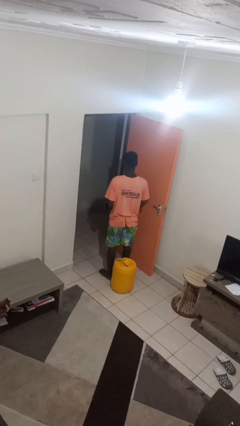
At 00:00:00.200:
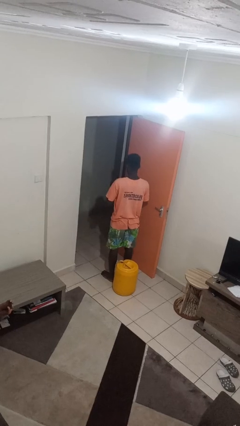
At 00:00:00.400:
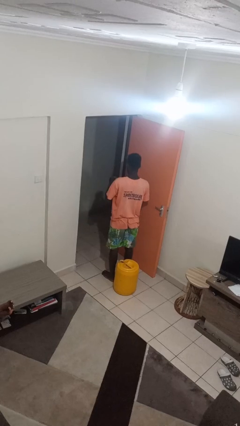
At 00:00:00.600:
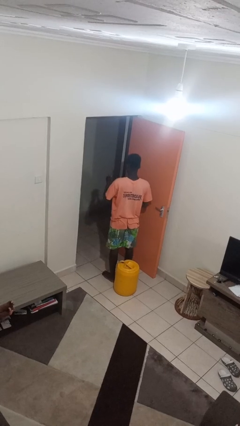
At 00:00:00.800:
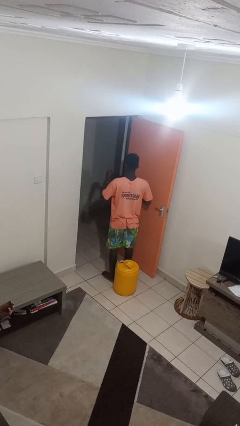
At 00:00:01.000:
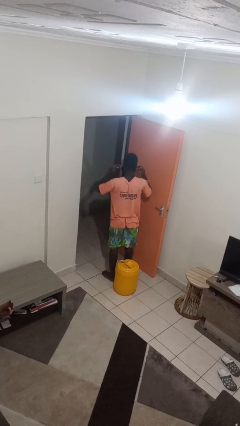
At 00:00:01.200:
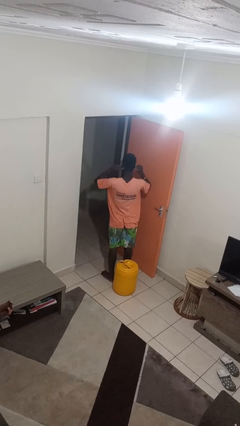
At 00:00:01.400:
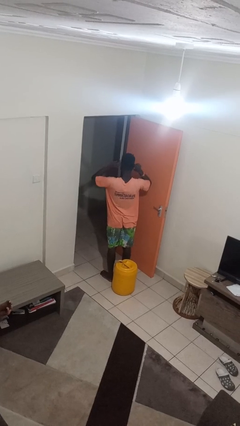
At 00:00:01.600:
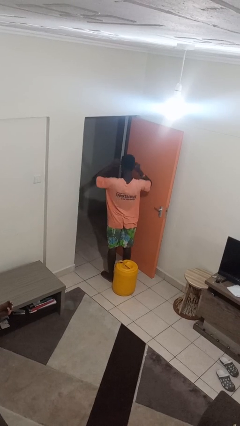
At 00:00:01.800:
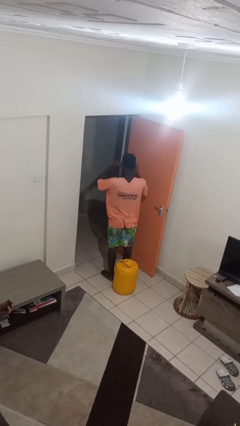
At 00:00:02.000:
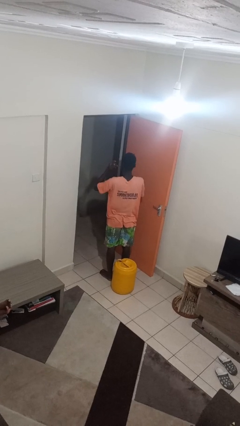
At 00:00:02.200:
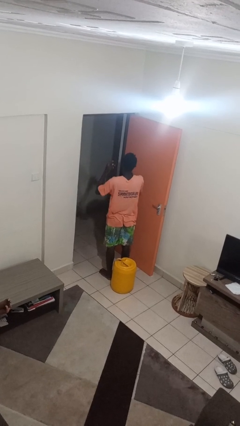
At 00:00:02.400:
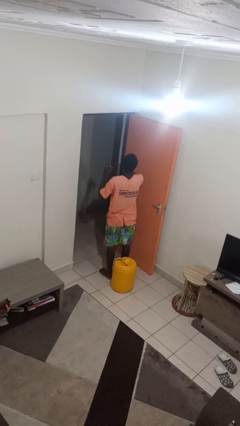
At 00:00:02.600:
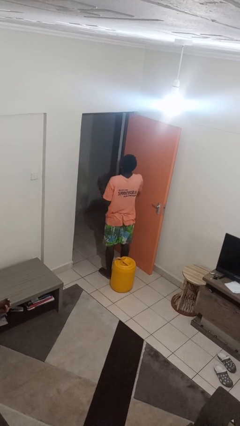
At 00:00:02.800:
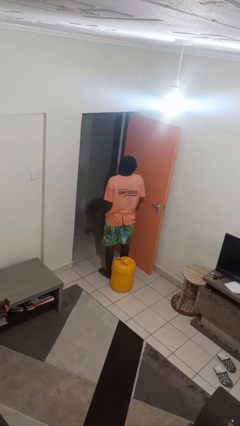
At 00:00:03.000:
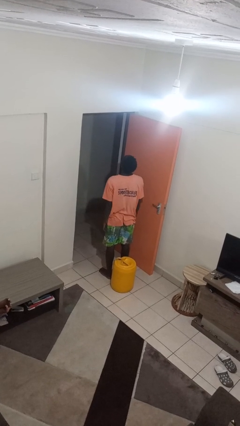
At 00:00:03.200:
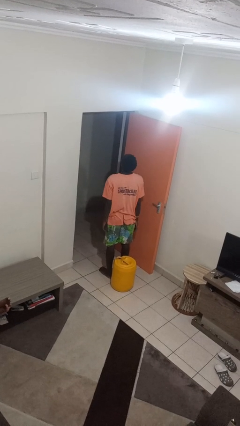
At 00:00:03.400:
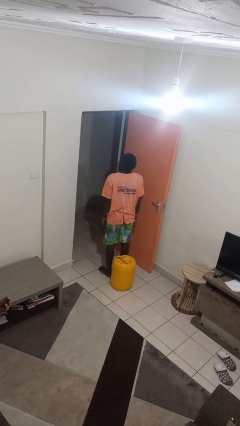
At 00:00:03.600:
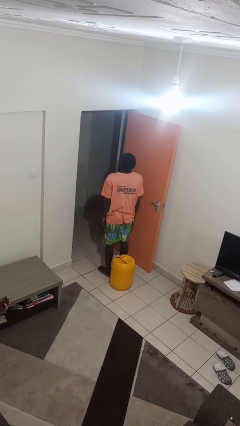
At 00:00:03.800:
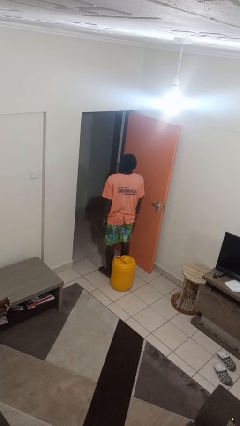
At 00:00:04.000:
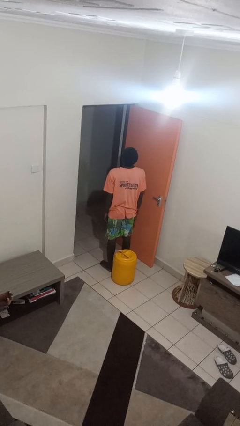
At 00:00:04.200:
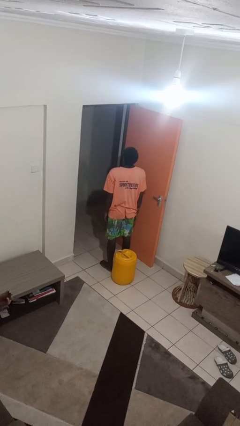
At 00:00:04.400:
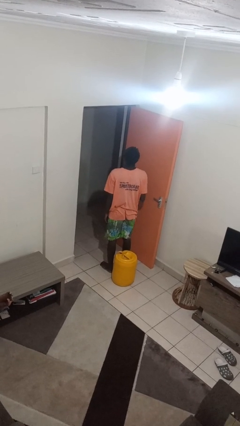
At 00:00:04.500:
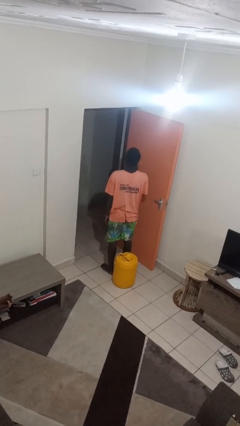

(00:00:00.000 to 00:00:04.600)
person puts on facemask

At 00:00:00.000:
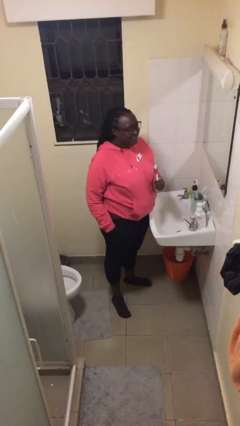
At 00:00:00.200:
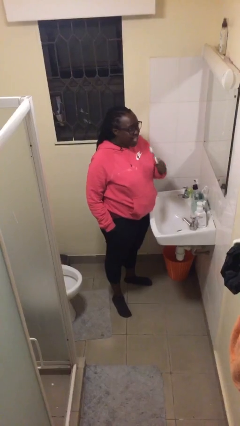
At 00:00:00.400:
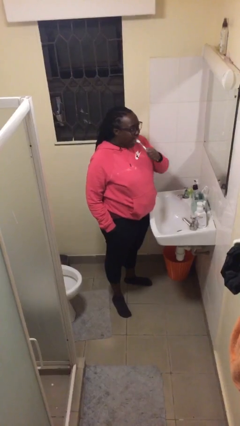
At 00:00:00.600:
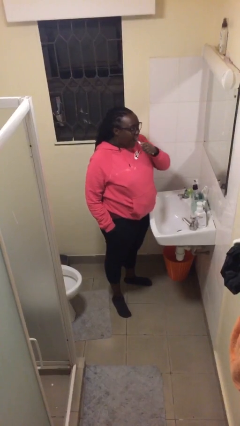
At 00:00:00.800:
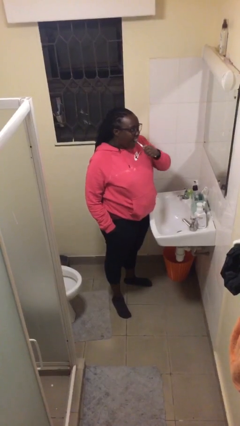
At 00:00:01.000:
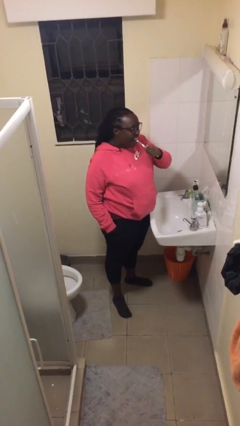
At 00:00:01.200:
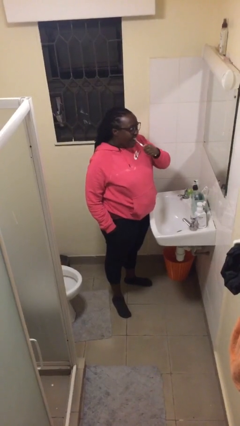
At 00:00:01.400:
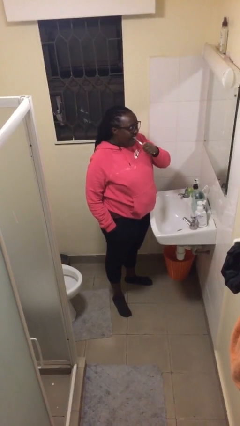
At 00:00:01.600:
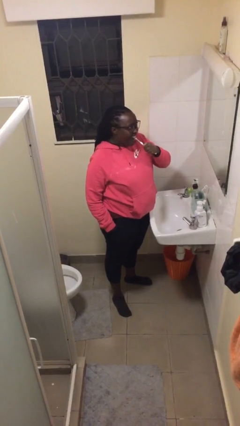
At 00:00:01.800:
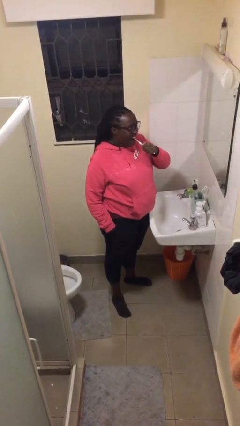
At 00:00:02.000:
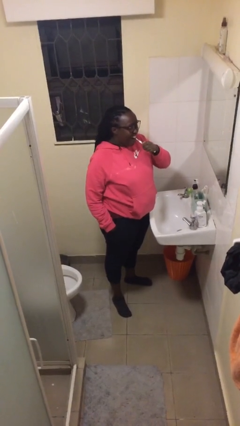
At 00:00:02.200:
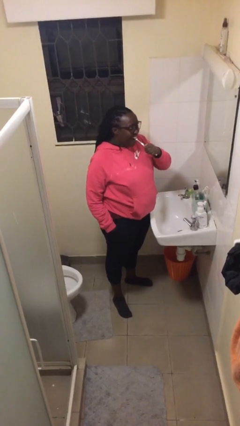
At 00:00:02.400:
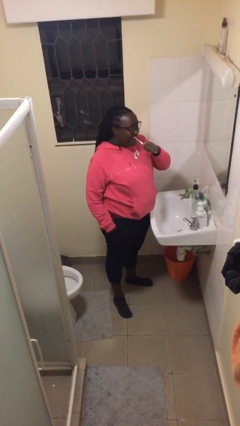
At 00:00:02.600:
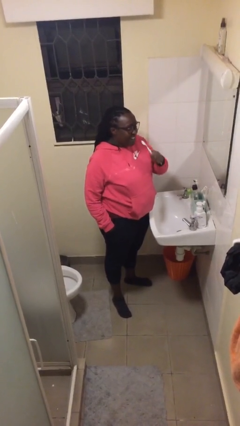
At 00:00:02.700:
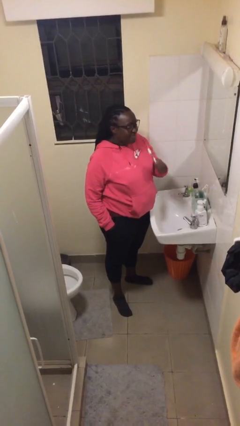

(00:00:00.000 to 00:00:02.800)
person brushes teeth

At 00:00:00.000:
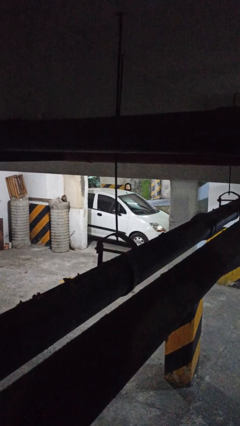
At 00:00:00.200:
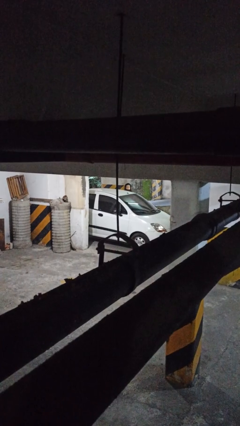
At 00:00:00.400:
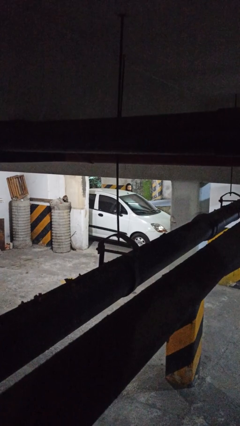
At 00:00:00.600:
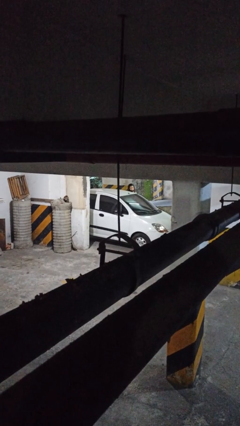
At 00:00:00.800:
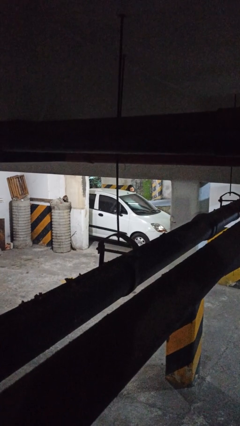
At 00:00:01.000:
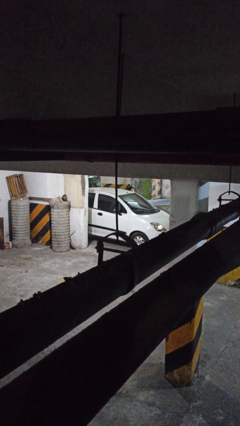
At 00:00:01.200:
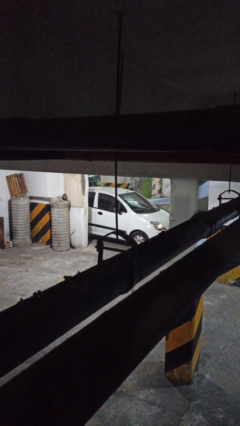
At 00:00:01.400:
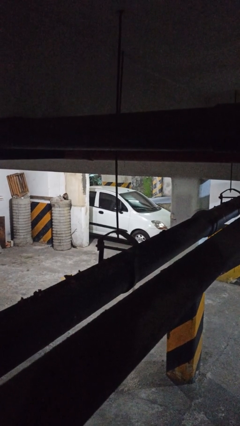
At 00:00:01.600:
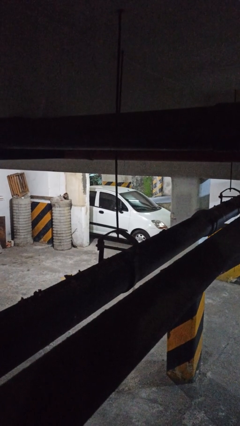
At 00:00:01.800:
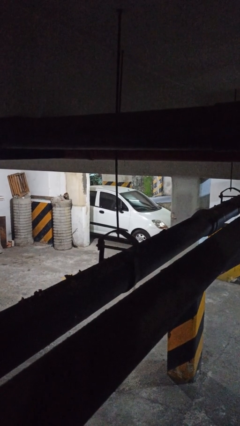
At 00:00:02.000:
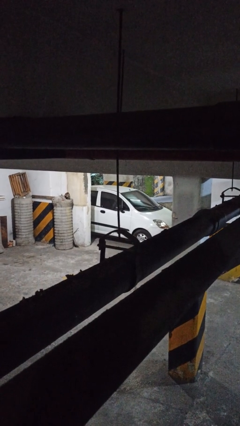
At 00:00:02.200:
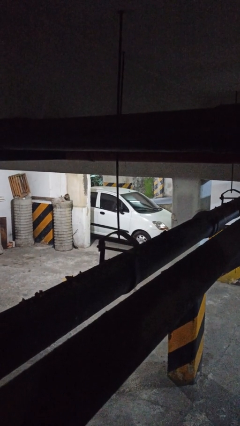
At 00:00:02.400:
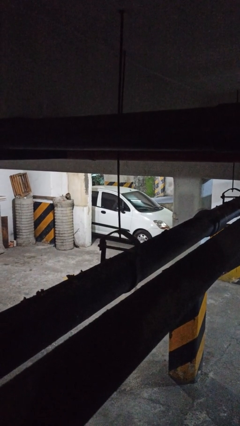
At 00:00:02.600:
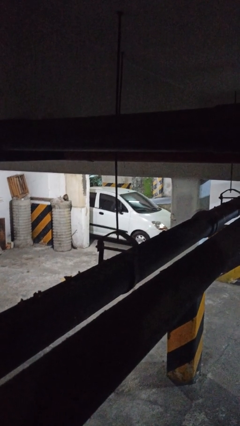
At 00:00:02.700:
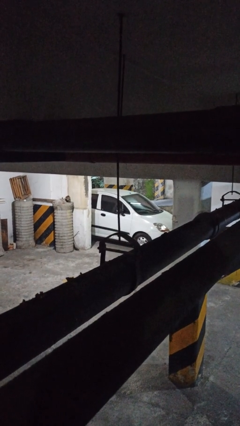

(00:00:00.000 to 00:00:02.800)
car picks up person

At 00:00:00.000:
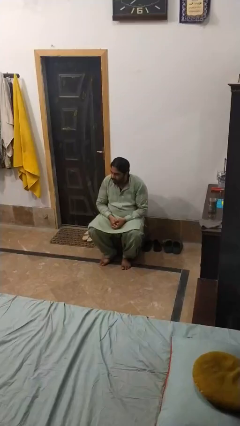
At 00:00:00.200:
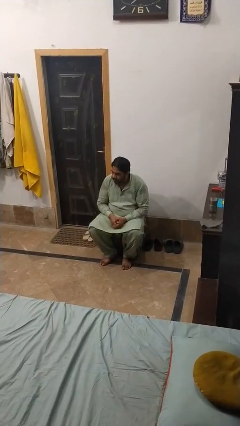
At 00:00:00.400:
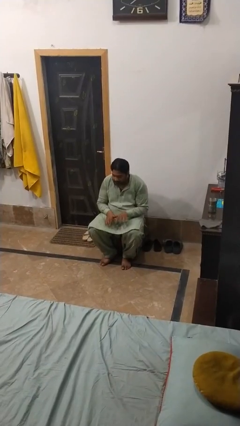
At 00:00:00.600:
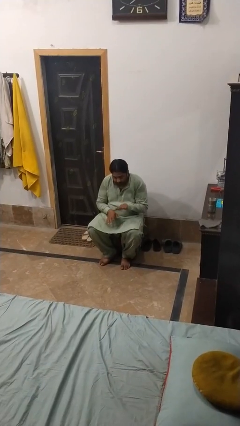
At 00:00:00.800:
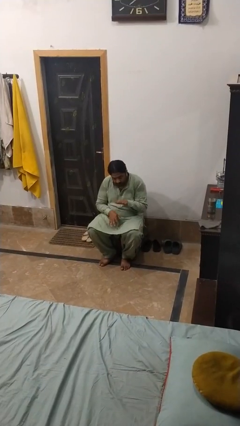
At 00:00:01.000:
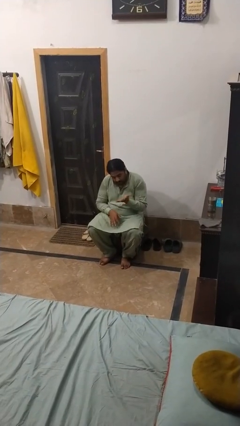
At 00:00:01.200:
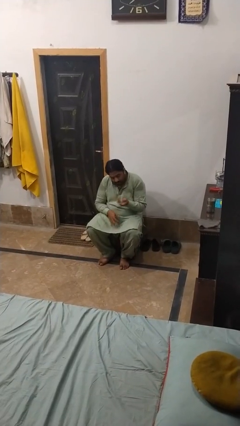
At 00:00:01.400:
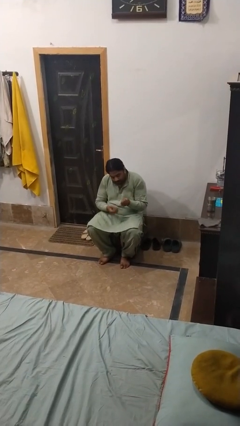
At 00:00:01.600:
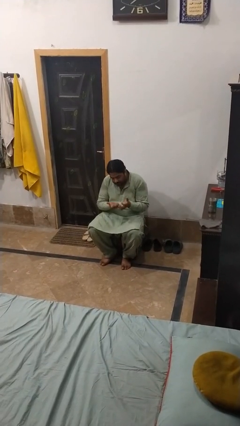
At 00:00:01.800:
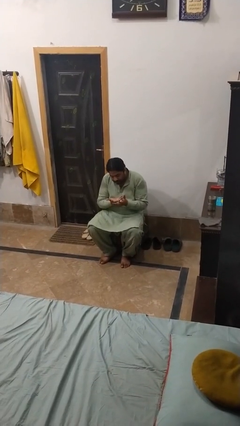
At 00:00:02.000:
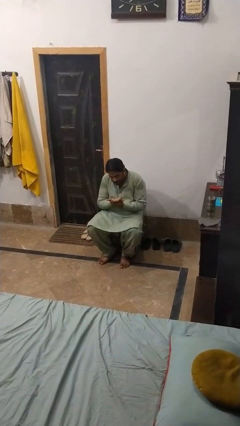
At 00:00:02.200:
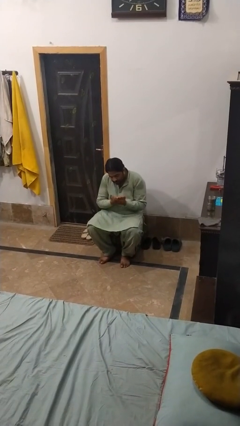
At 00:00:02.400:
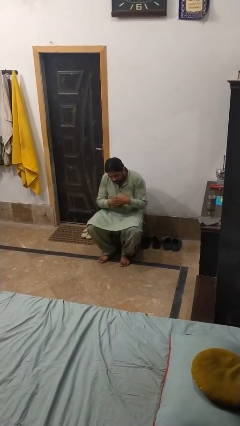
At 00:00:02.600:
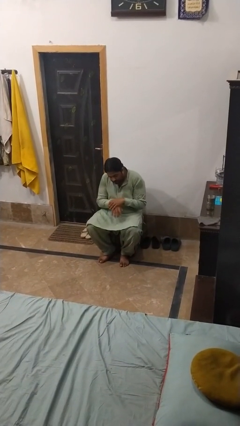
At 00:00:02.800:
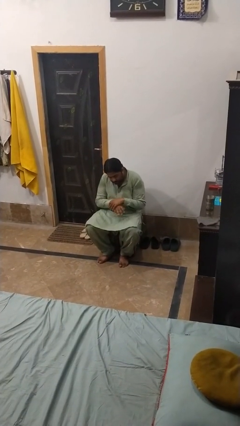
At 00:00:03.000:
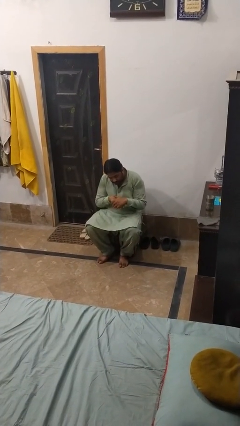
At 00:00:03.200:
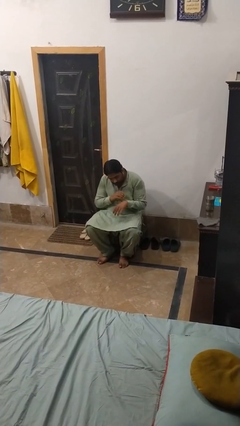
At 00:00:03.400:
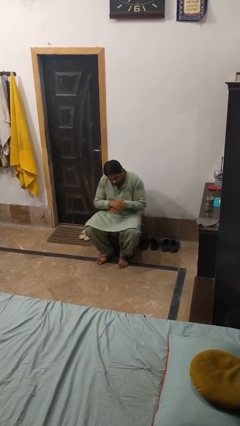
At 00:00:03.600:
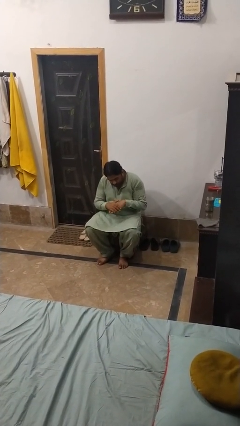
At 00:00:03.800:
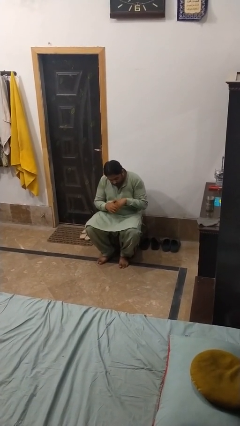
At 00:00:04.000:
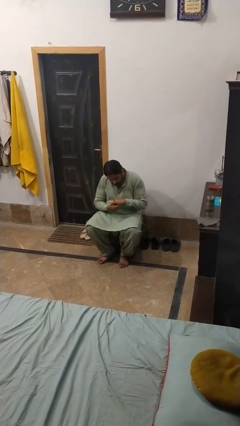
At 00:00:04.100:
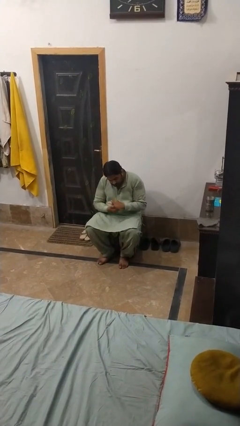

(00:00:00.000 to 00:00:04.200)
person looks at hands in lap

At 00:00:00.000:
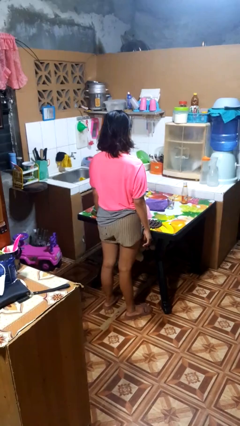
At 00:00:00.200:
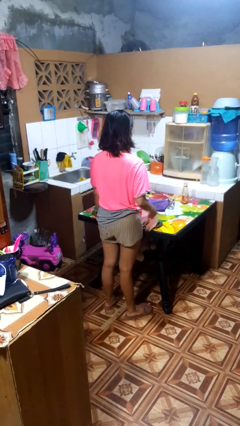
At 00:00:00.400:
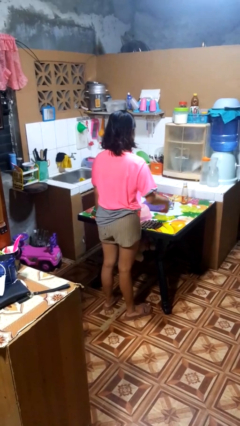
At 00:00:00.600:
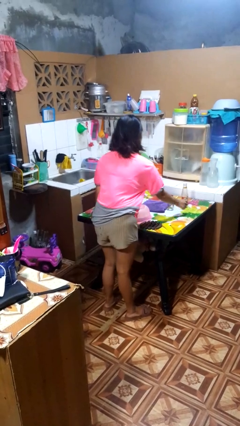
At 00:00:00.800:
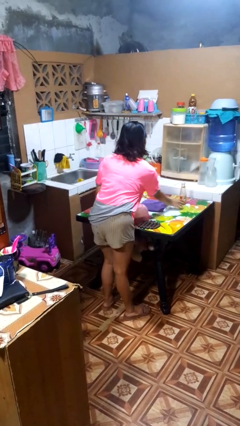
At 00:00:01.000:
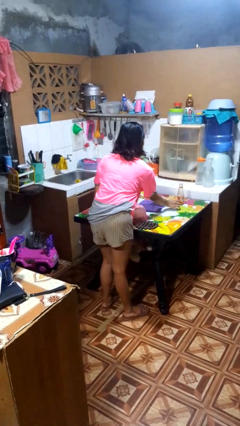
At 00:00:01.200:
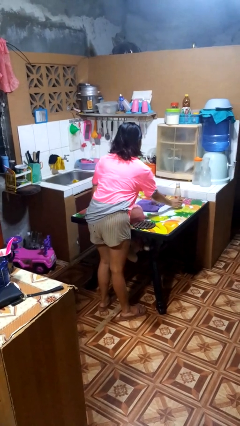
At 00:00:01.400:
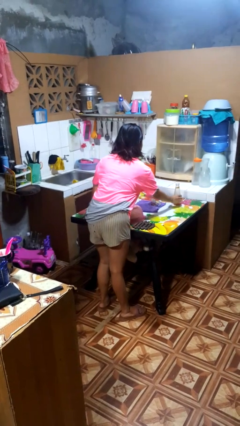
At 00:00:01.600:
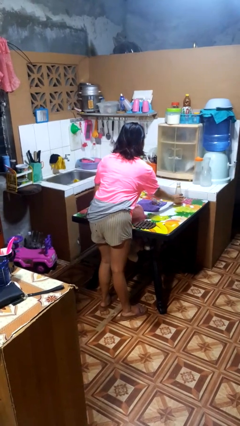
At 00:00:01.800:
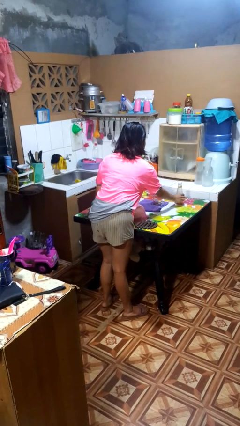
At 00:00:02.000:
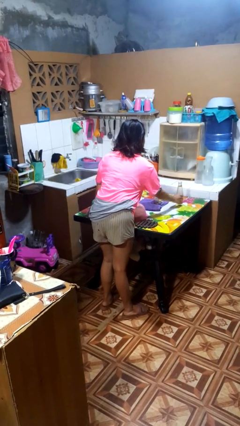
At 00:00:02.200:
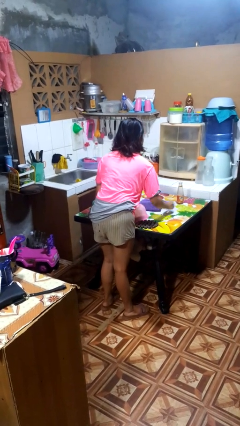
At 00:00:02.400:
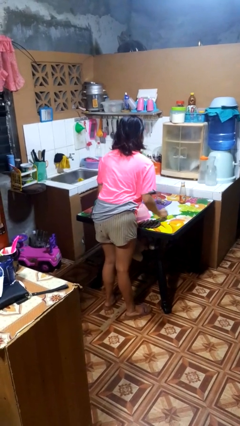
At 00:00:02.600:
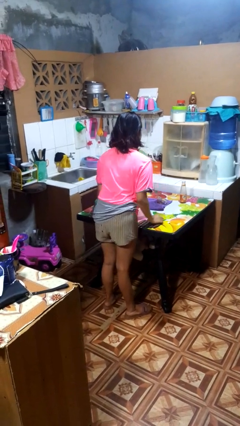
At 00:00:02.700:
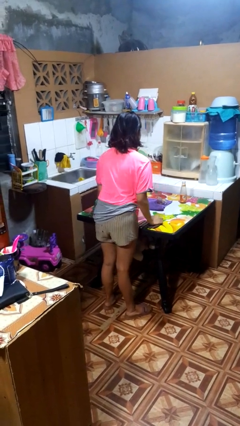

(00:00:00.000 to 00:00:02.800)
person knocks over glass
